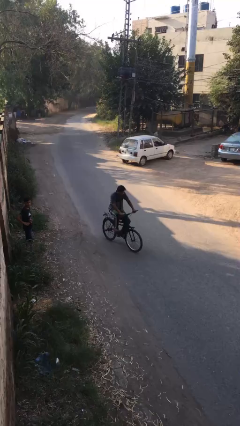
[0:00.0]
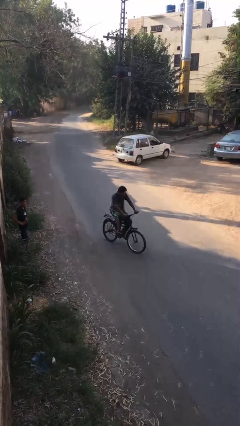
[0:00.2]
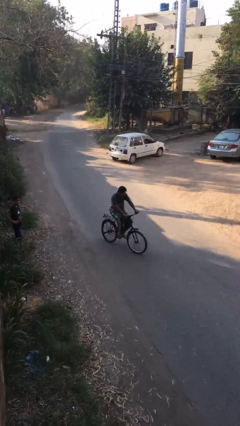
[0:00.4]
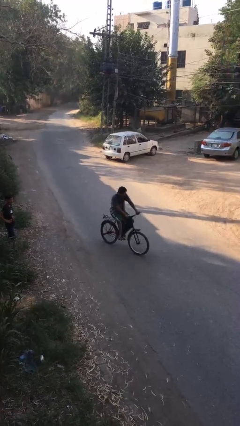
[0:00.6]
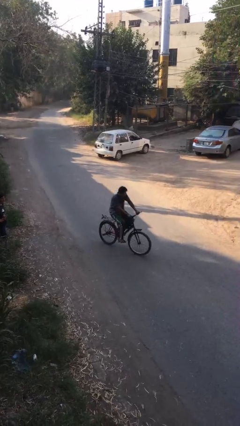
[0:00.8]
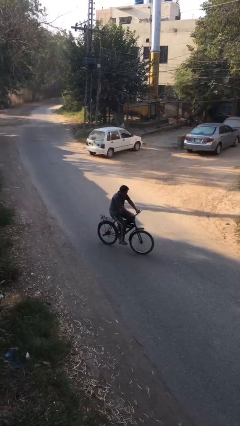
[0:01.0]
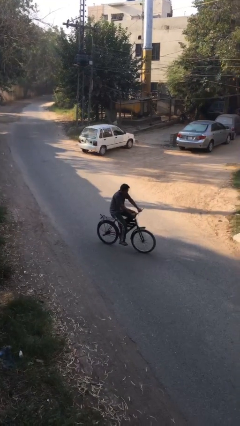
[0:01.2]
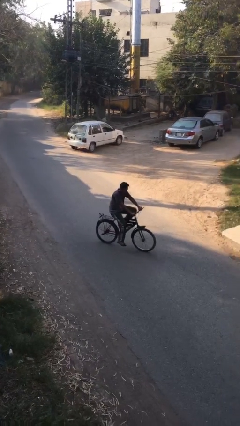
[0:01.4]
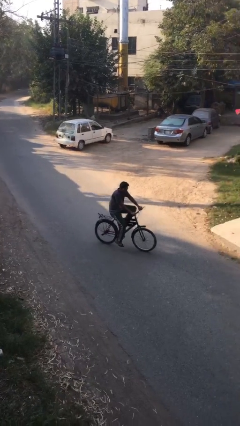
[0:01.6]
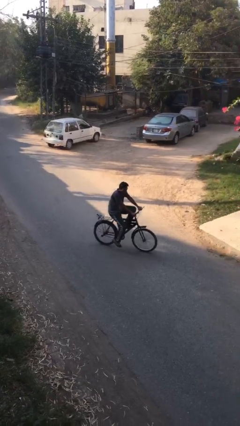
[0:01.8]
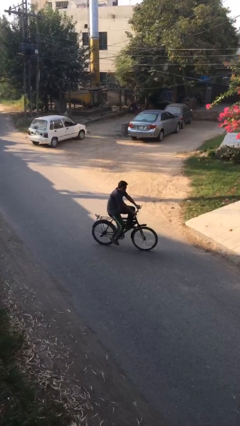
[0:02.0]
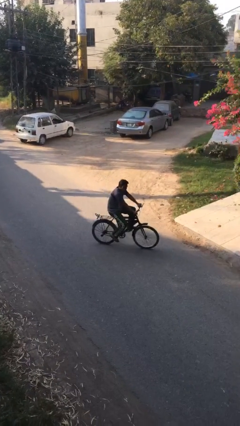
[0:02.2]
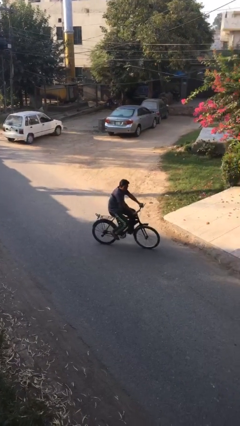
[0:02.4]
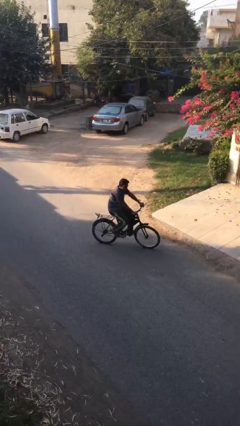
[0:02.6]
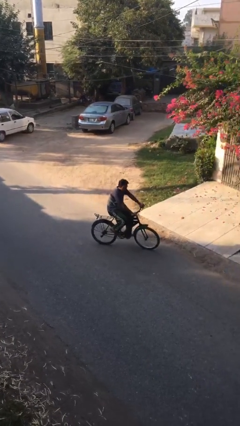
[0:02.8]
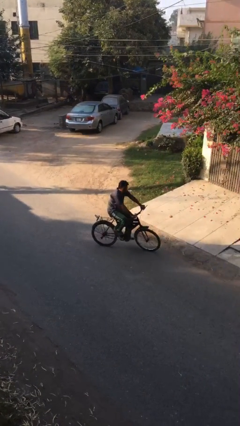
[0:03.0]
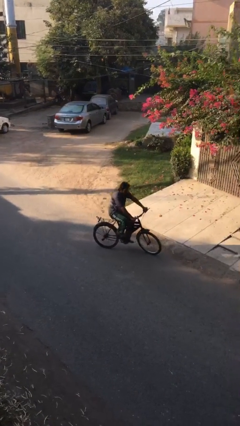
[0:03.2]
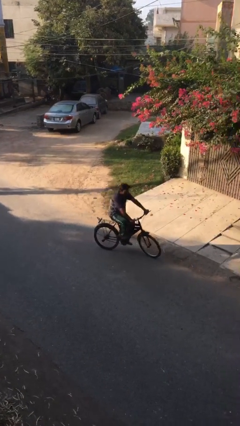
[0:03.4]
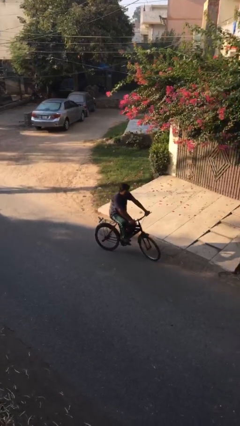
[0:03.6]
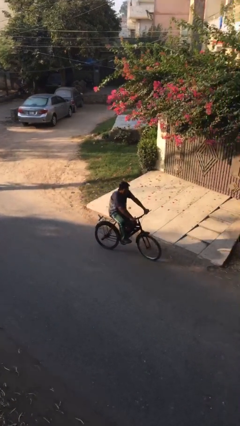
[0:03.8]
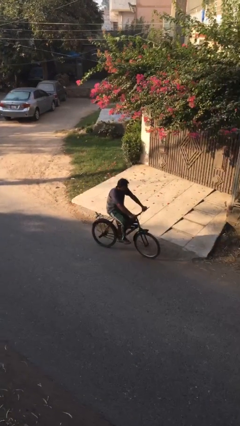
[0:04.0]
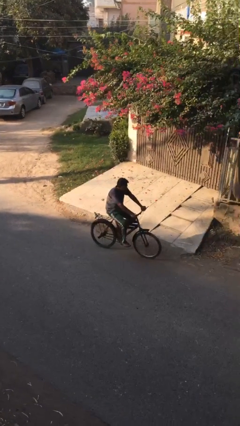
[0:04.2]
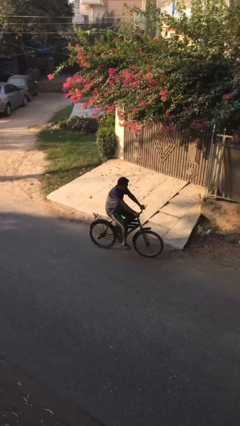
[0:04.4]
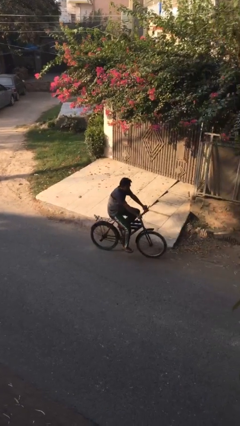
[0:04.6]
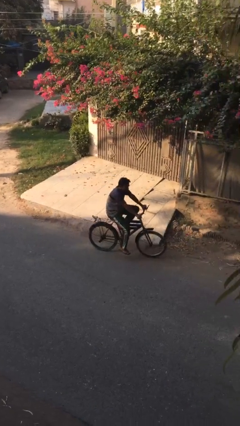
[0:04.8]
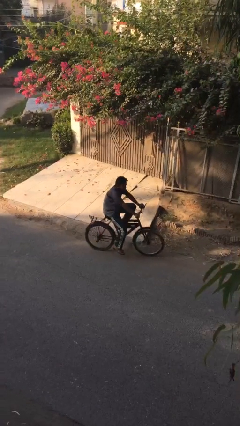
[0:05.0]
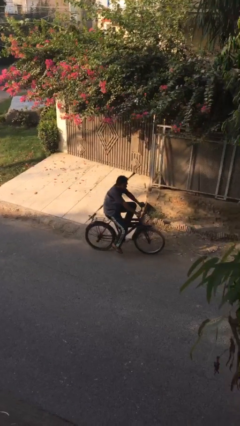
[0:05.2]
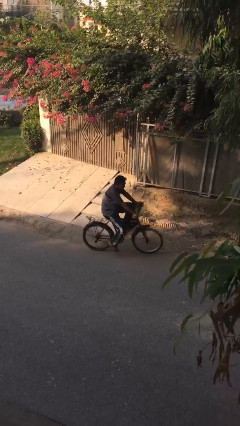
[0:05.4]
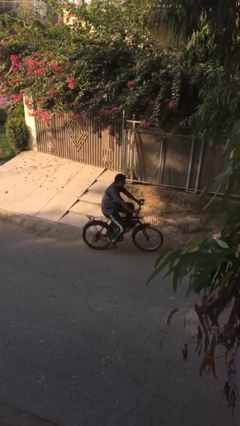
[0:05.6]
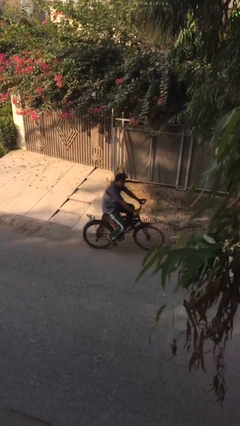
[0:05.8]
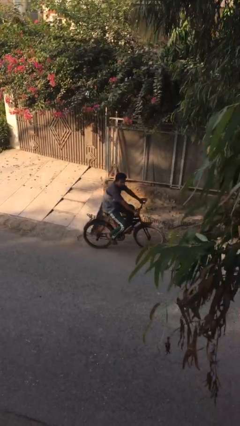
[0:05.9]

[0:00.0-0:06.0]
person rides bicycle

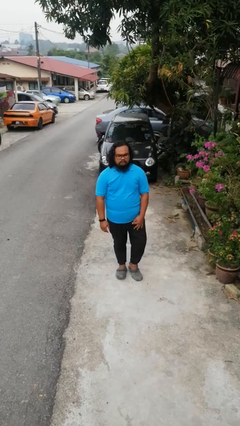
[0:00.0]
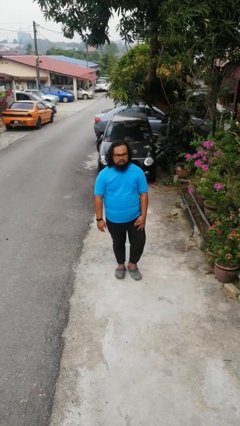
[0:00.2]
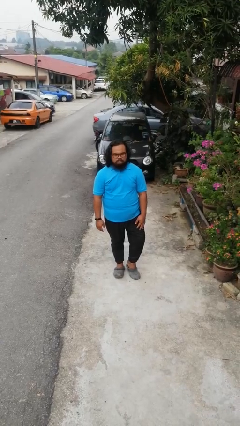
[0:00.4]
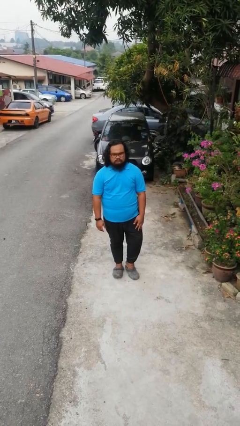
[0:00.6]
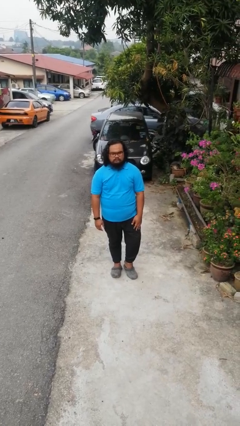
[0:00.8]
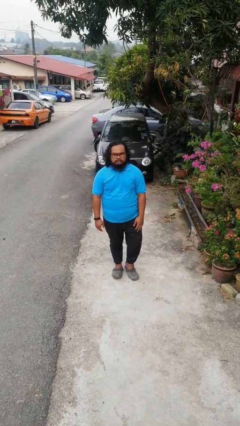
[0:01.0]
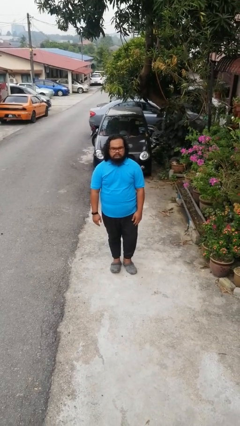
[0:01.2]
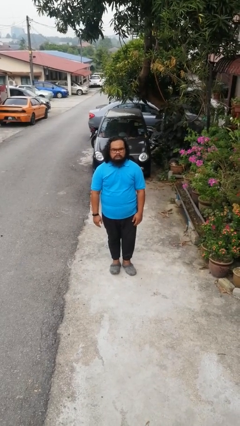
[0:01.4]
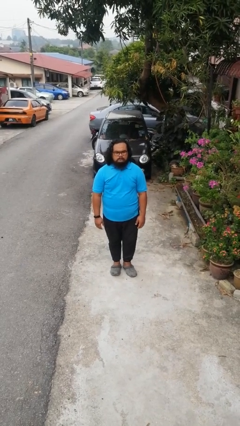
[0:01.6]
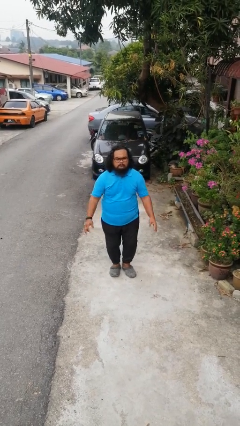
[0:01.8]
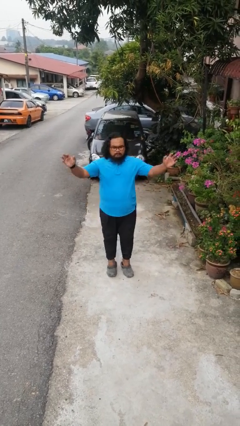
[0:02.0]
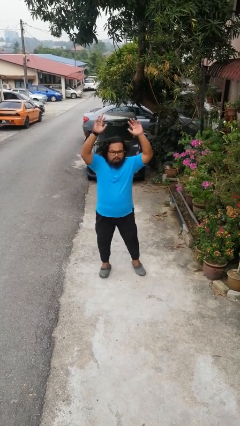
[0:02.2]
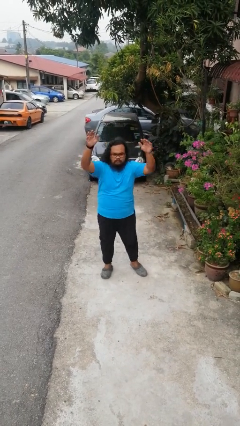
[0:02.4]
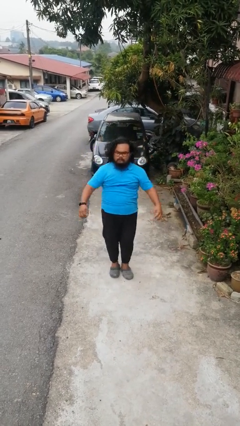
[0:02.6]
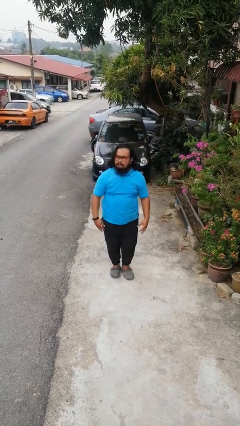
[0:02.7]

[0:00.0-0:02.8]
person exercises with jumping jacks

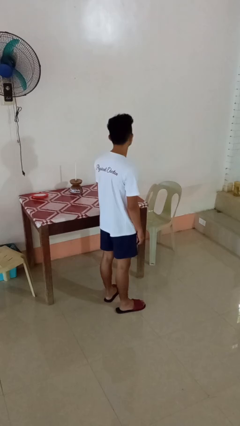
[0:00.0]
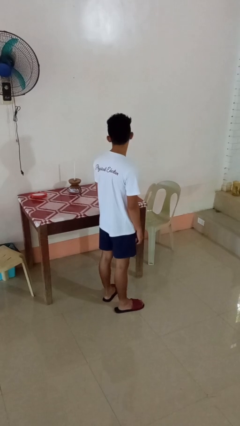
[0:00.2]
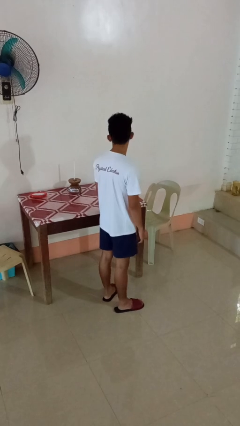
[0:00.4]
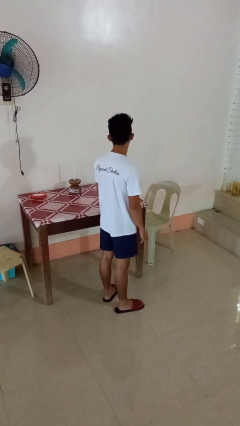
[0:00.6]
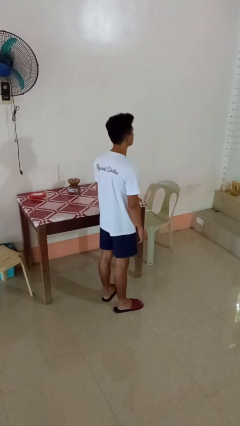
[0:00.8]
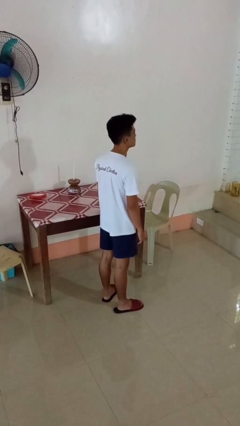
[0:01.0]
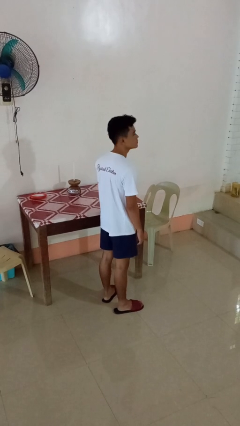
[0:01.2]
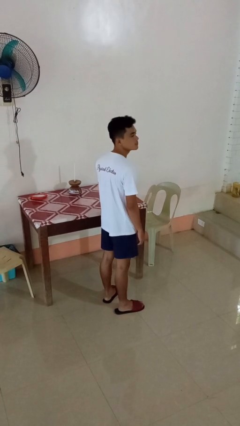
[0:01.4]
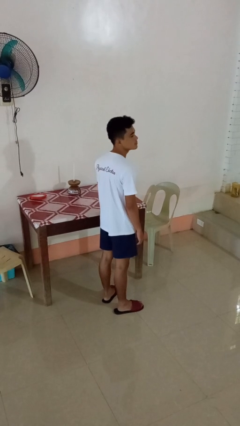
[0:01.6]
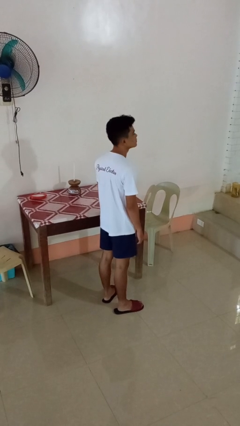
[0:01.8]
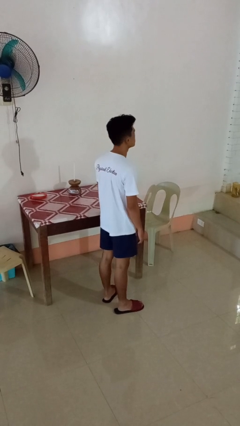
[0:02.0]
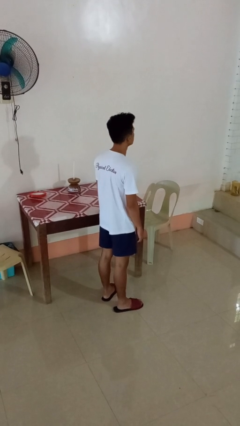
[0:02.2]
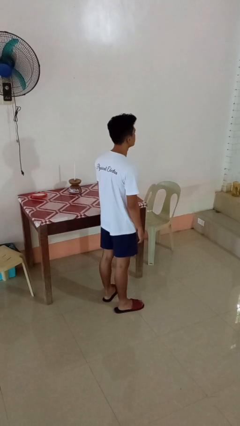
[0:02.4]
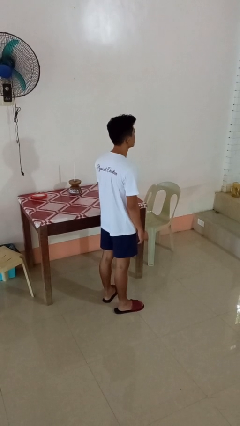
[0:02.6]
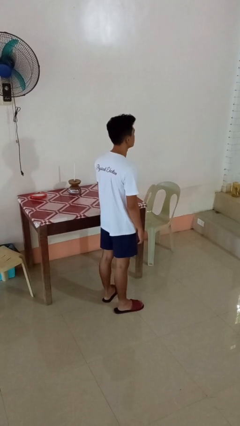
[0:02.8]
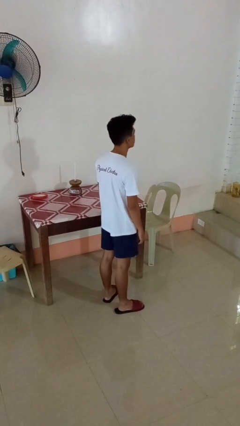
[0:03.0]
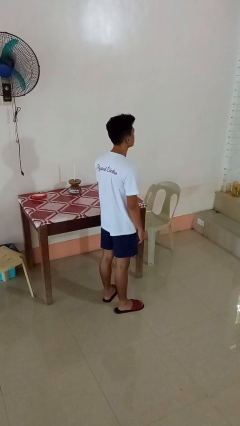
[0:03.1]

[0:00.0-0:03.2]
person shakes head

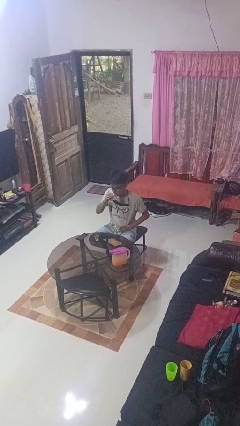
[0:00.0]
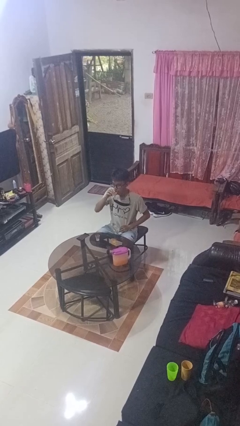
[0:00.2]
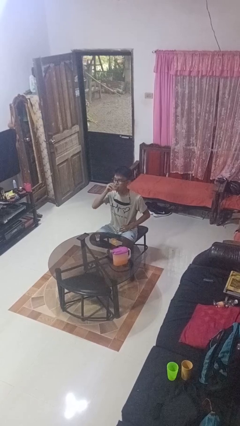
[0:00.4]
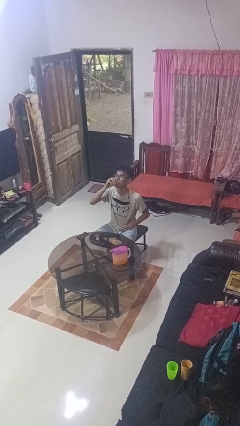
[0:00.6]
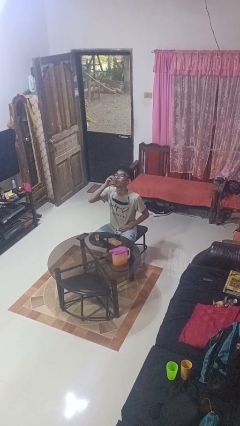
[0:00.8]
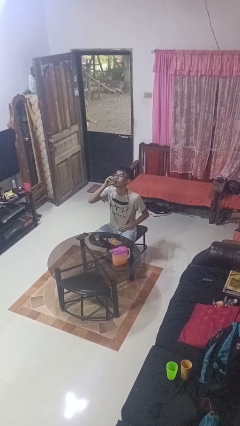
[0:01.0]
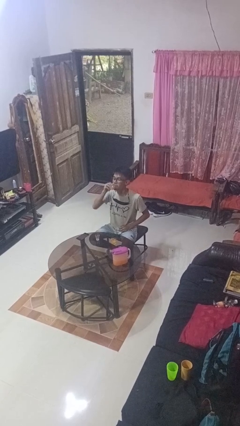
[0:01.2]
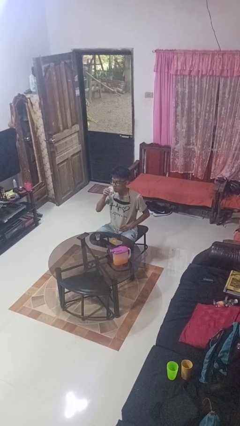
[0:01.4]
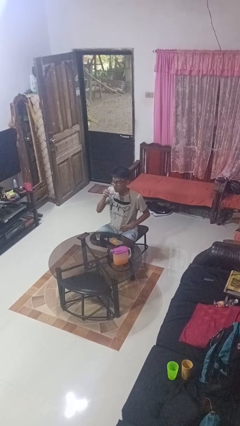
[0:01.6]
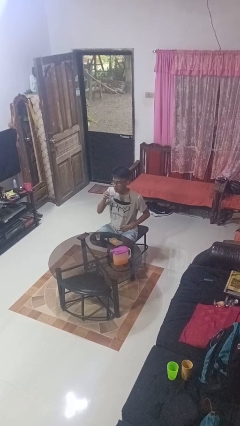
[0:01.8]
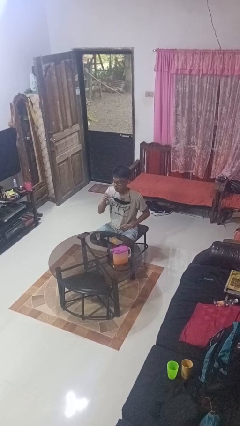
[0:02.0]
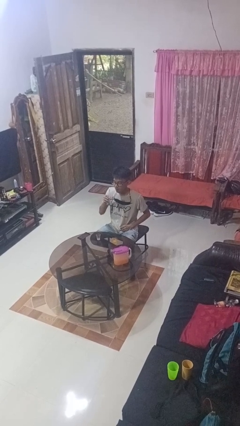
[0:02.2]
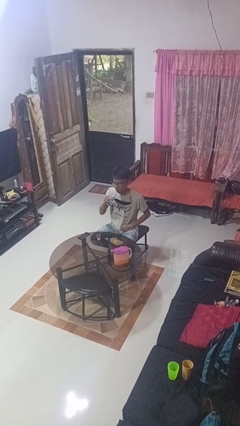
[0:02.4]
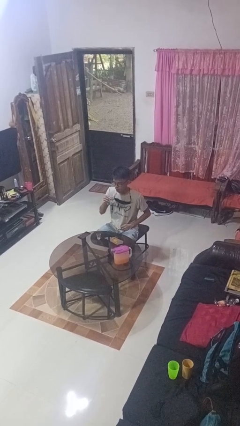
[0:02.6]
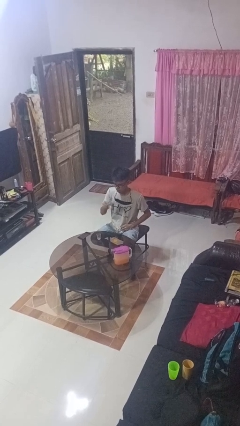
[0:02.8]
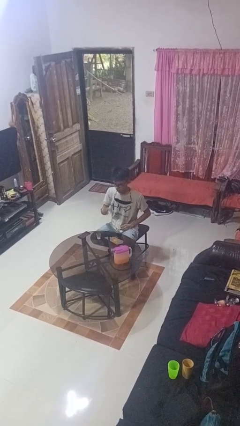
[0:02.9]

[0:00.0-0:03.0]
person drinks from shotglass

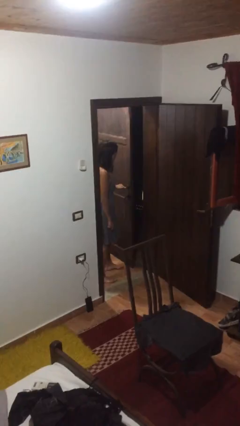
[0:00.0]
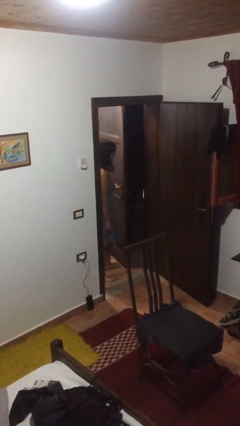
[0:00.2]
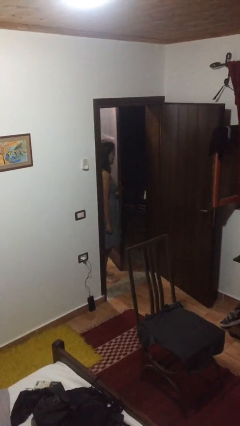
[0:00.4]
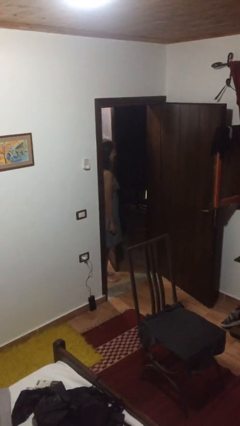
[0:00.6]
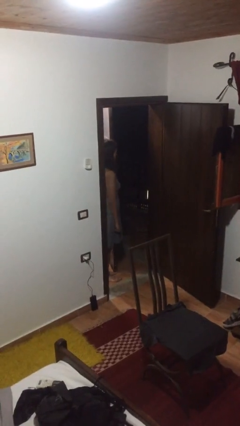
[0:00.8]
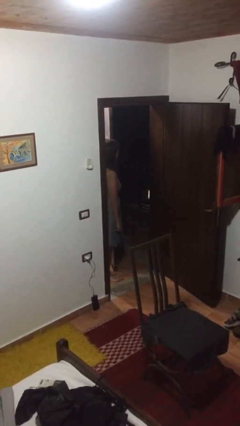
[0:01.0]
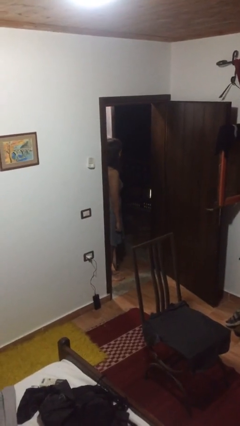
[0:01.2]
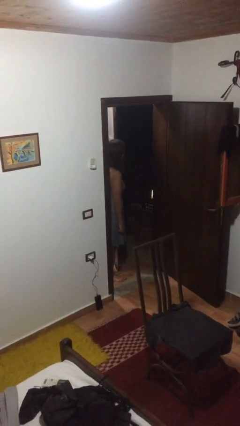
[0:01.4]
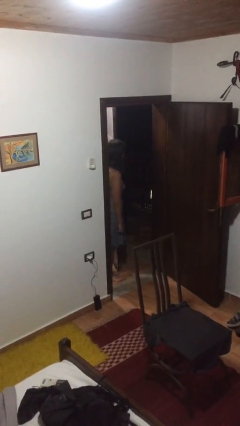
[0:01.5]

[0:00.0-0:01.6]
person opens facility door

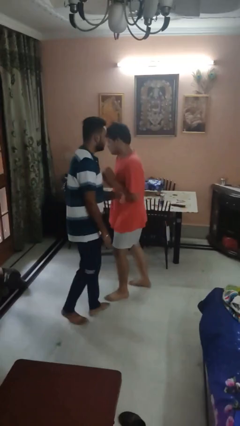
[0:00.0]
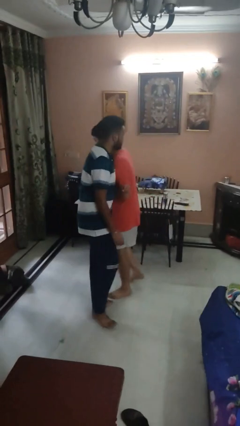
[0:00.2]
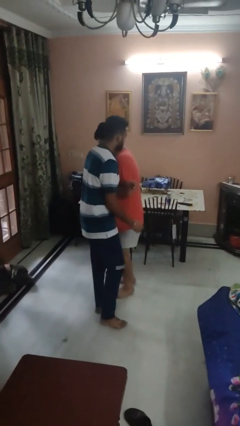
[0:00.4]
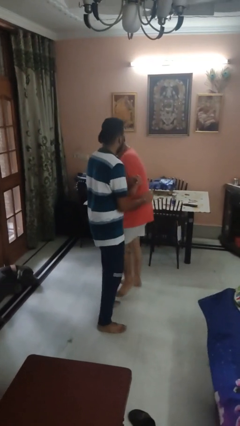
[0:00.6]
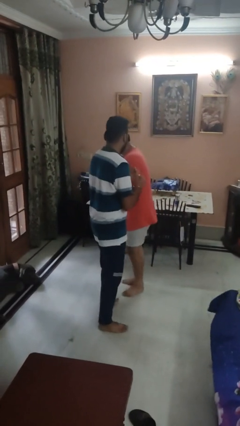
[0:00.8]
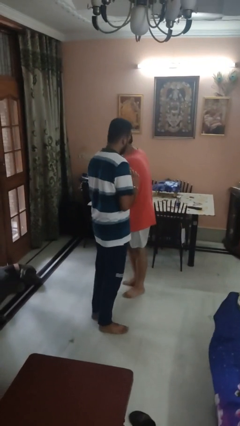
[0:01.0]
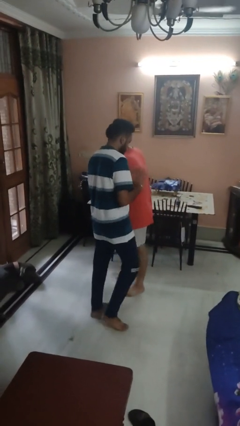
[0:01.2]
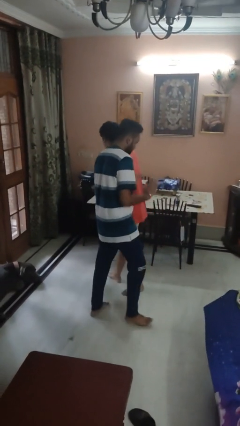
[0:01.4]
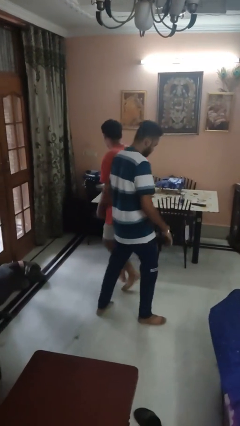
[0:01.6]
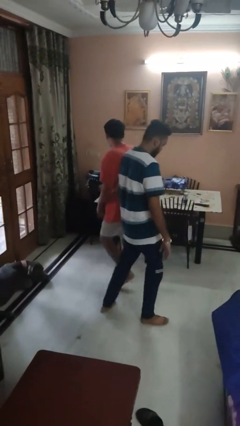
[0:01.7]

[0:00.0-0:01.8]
person bumps into person
